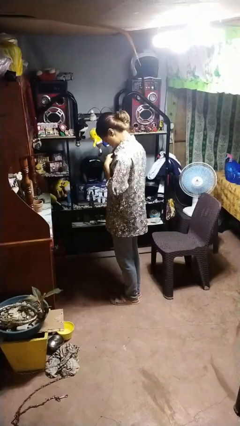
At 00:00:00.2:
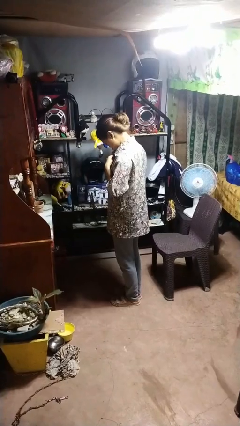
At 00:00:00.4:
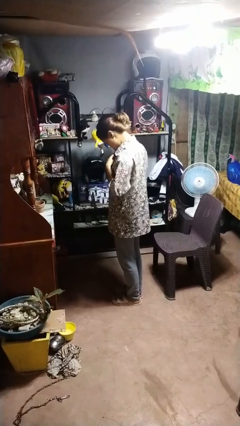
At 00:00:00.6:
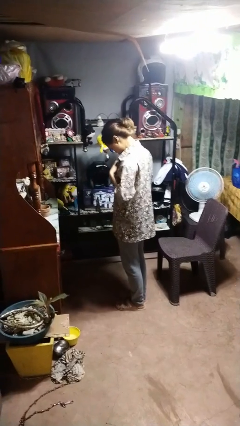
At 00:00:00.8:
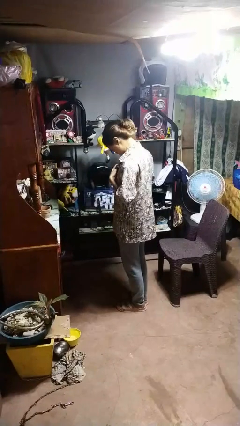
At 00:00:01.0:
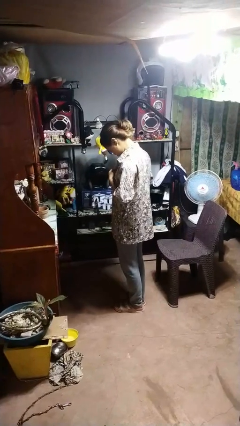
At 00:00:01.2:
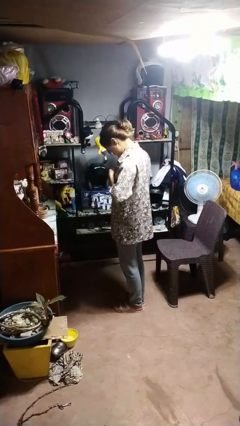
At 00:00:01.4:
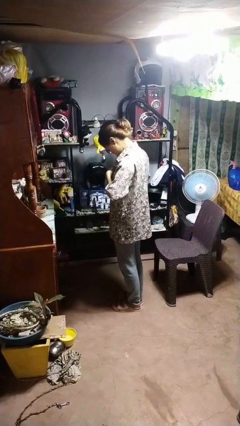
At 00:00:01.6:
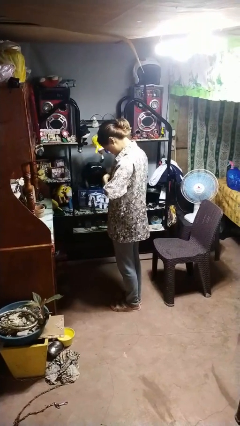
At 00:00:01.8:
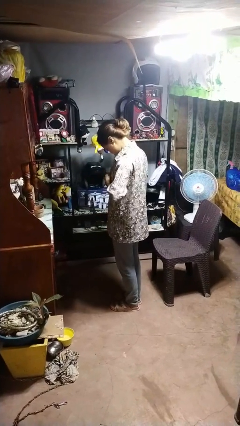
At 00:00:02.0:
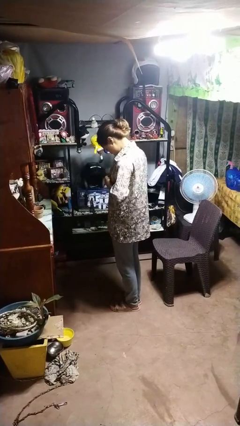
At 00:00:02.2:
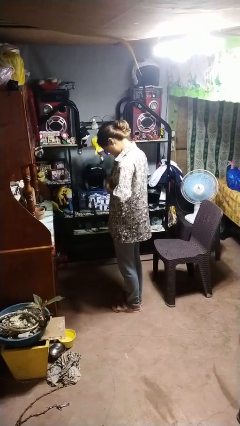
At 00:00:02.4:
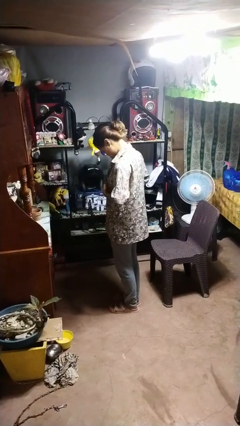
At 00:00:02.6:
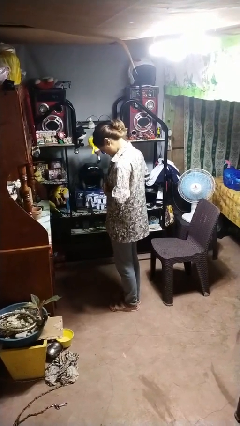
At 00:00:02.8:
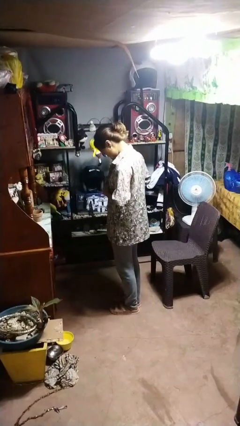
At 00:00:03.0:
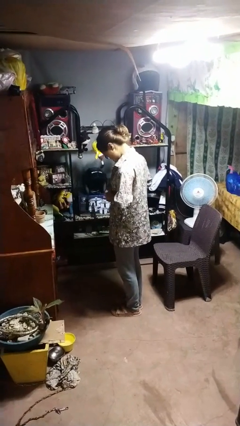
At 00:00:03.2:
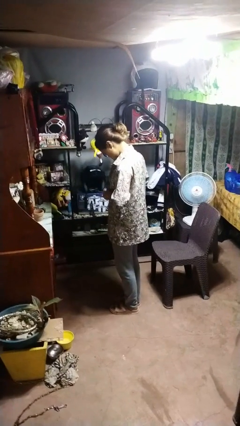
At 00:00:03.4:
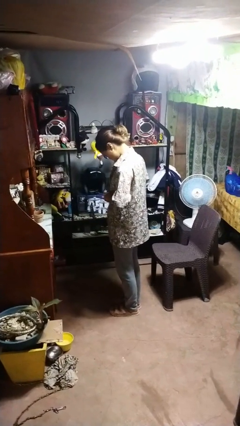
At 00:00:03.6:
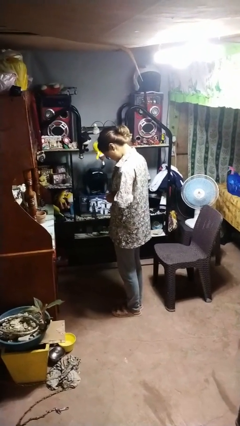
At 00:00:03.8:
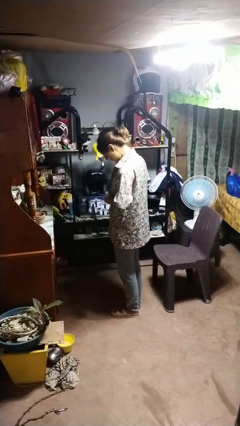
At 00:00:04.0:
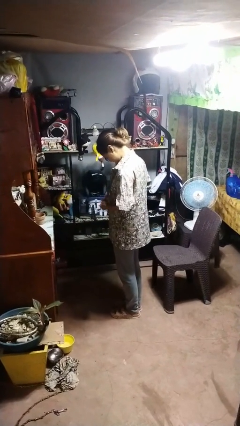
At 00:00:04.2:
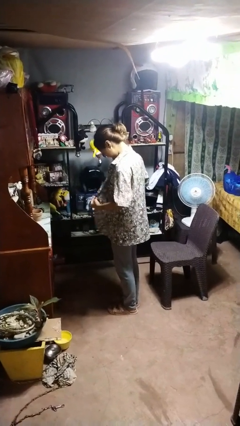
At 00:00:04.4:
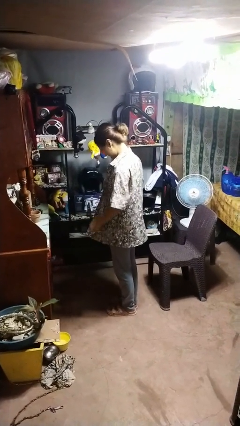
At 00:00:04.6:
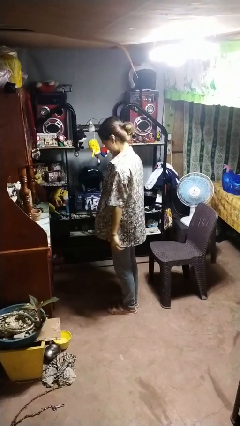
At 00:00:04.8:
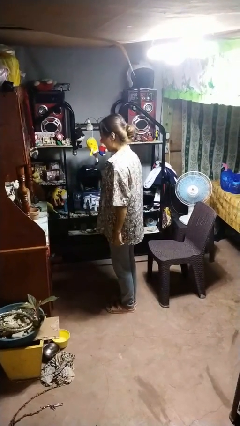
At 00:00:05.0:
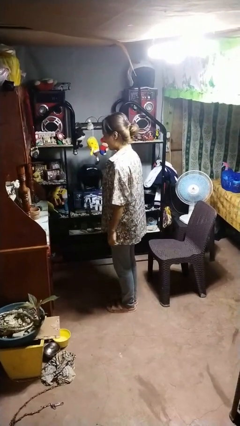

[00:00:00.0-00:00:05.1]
person unbuttons shirt

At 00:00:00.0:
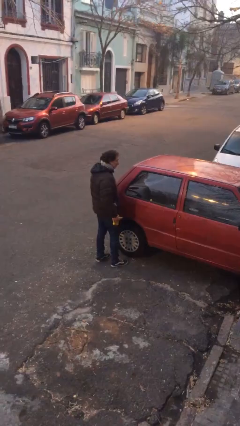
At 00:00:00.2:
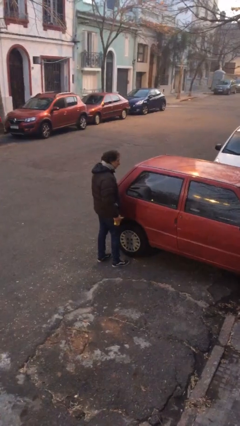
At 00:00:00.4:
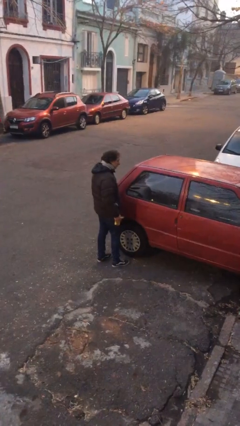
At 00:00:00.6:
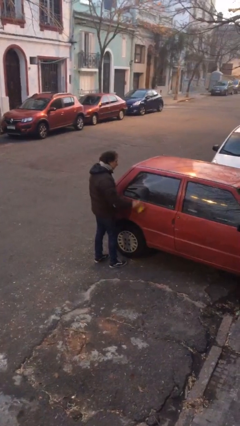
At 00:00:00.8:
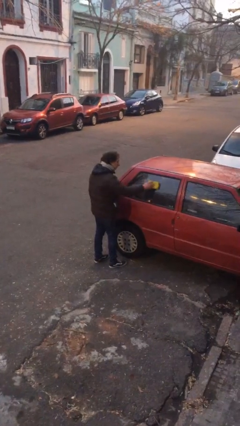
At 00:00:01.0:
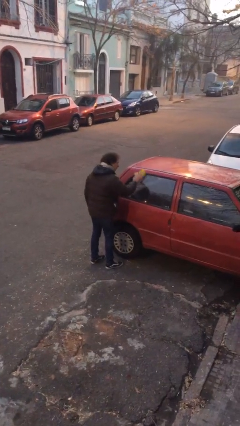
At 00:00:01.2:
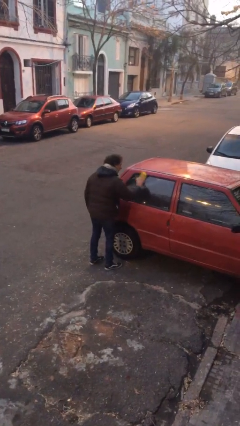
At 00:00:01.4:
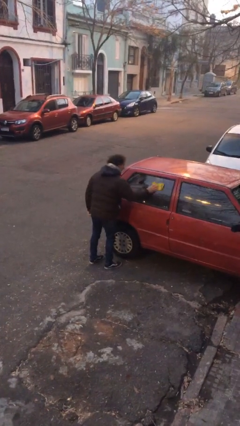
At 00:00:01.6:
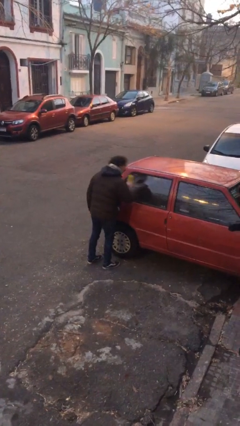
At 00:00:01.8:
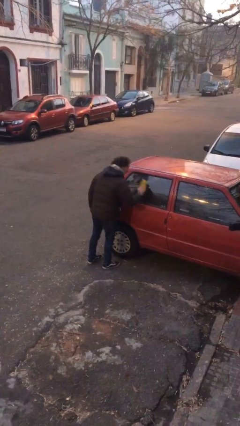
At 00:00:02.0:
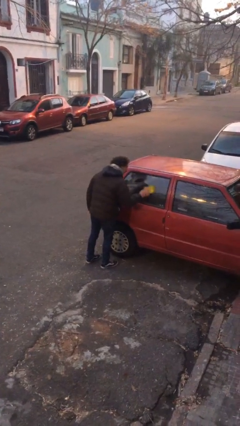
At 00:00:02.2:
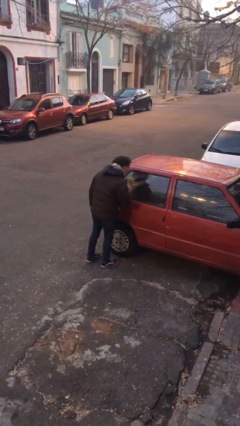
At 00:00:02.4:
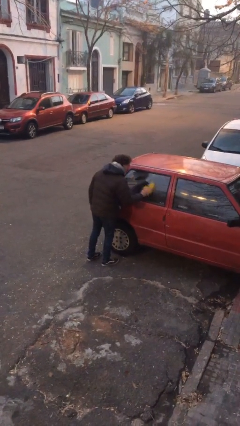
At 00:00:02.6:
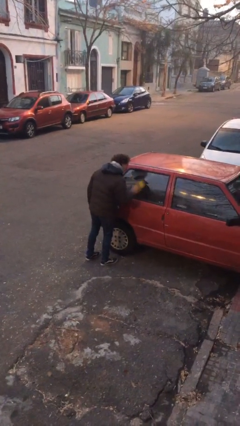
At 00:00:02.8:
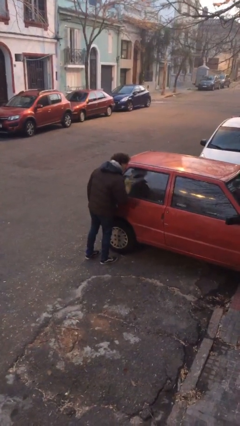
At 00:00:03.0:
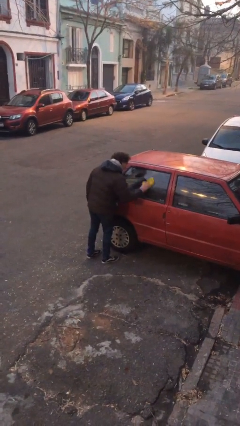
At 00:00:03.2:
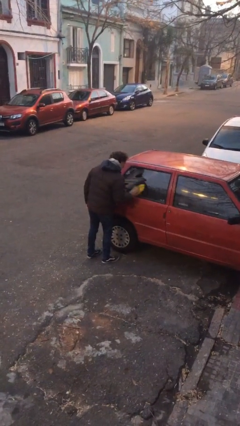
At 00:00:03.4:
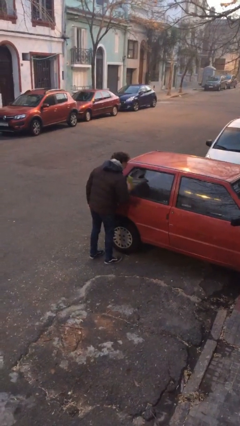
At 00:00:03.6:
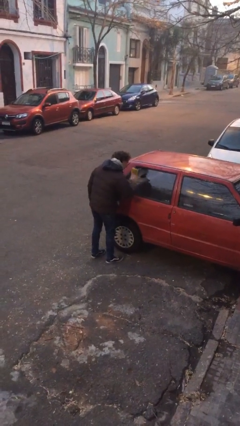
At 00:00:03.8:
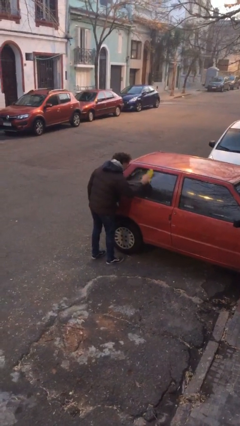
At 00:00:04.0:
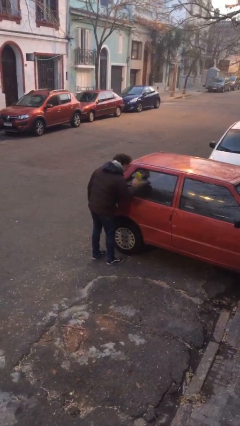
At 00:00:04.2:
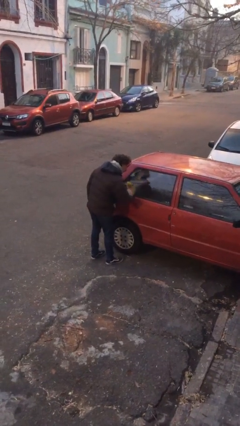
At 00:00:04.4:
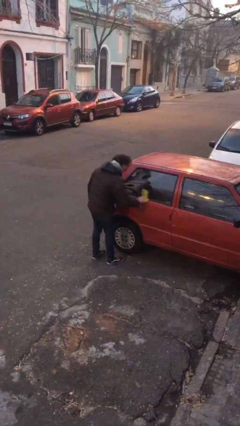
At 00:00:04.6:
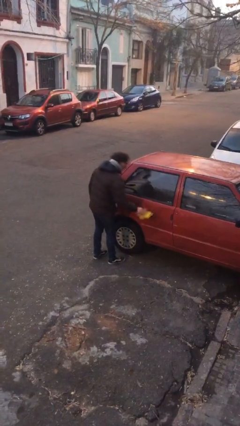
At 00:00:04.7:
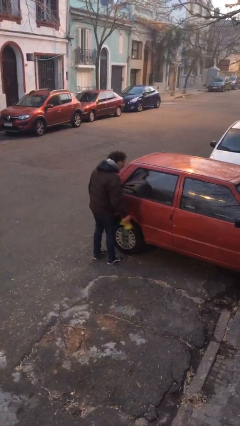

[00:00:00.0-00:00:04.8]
person polishes car with rag

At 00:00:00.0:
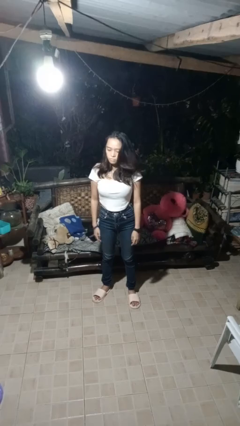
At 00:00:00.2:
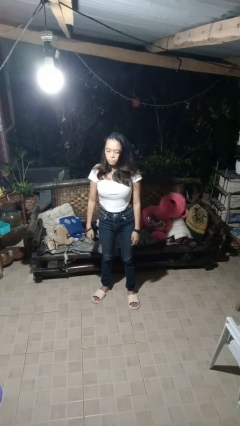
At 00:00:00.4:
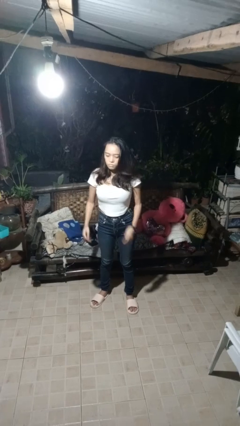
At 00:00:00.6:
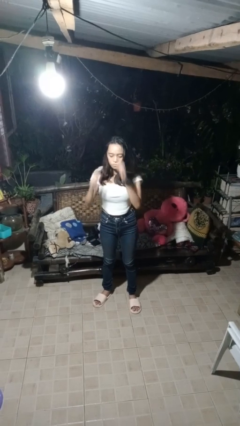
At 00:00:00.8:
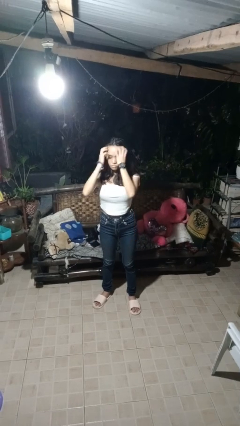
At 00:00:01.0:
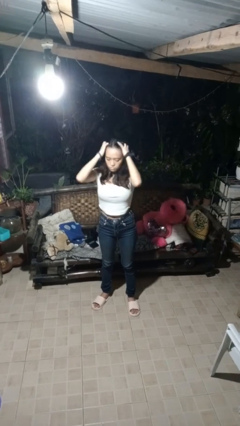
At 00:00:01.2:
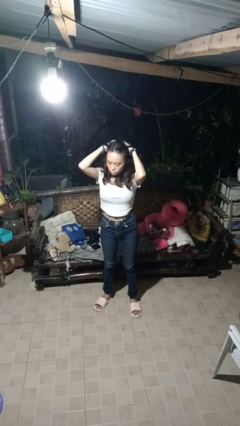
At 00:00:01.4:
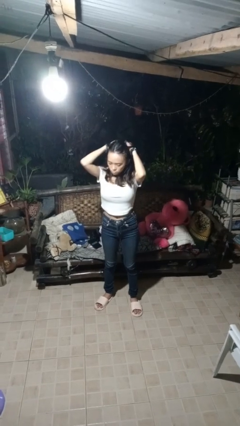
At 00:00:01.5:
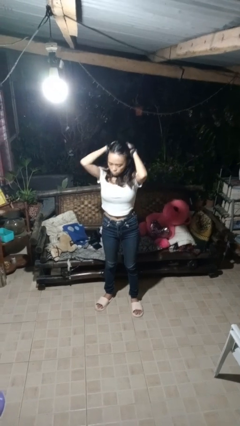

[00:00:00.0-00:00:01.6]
person strokes hair

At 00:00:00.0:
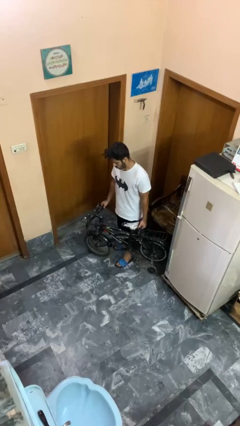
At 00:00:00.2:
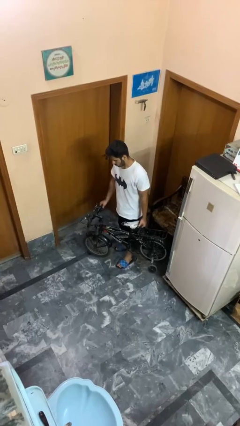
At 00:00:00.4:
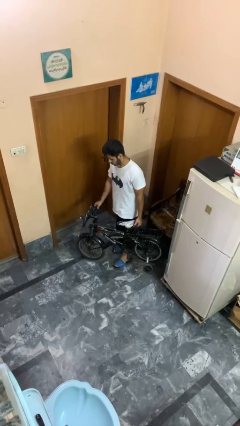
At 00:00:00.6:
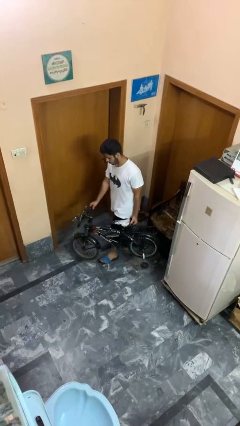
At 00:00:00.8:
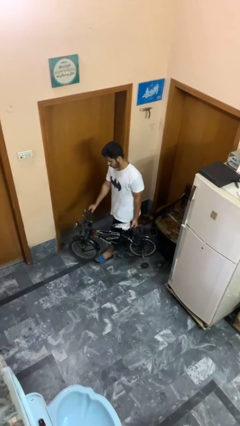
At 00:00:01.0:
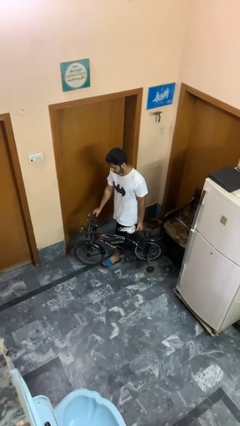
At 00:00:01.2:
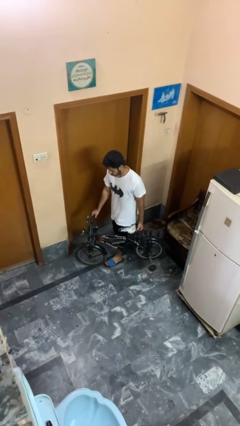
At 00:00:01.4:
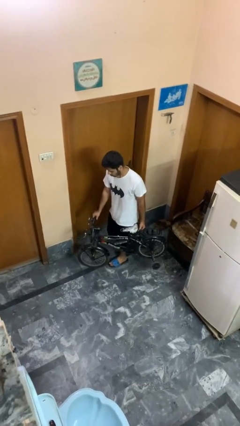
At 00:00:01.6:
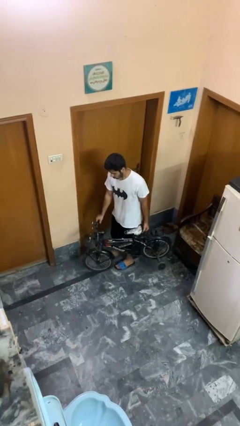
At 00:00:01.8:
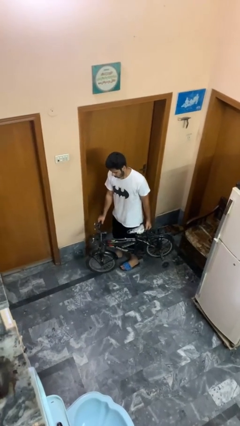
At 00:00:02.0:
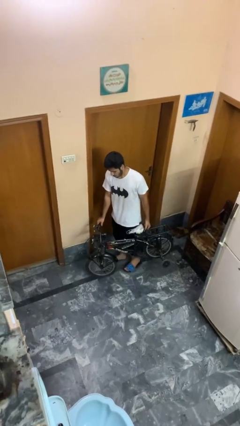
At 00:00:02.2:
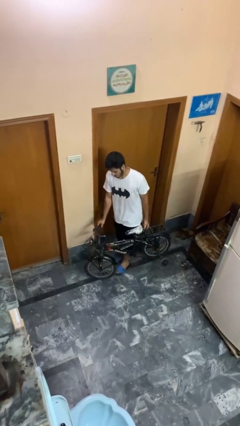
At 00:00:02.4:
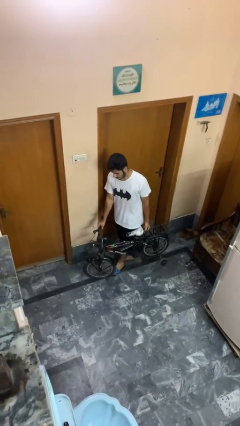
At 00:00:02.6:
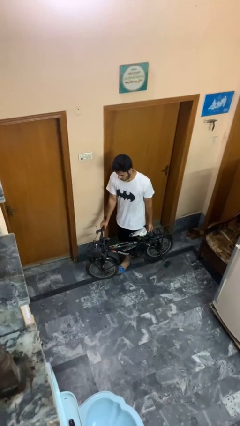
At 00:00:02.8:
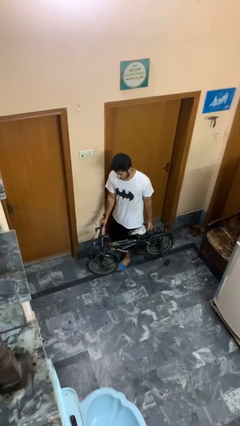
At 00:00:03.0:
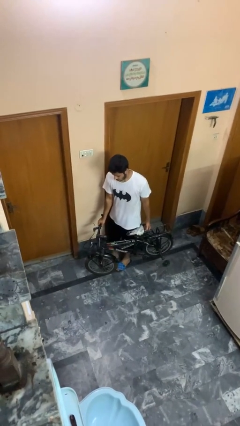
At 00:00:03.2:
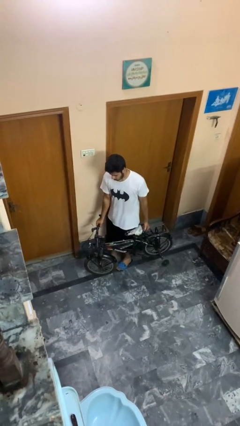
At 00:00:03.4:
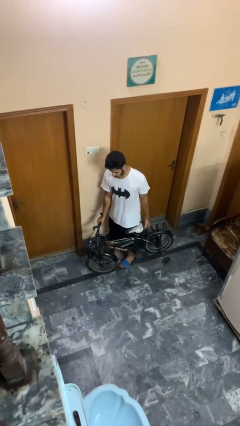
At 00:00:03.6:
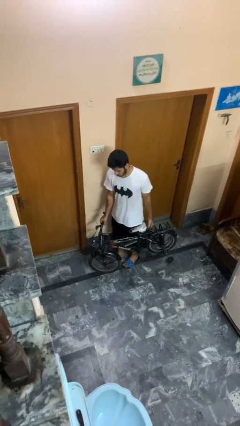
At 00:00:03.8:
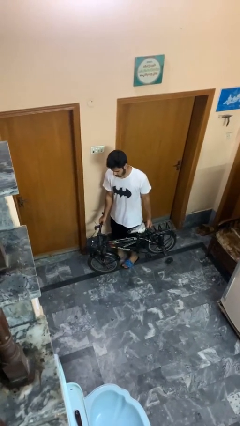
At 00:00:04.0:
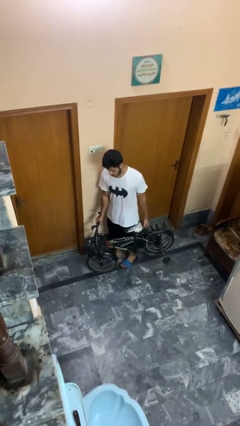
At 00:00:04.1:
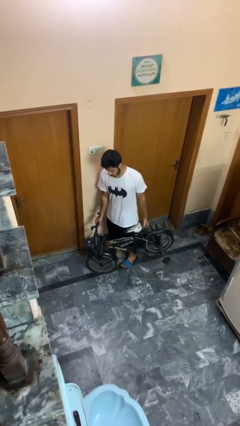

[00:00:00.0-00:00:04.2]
person carries bicycle

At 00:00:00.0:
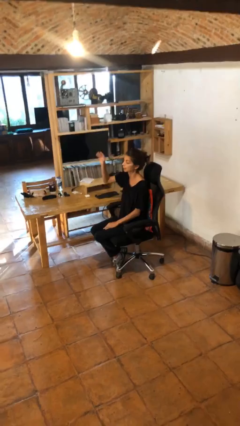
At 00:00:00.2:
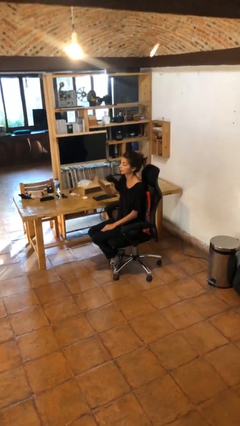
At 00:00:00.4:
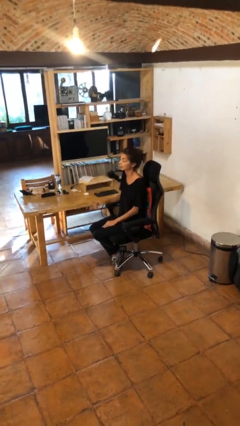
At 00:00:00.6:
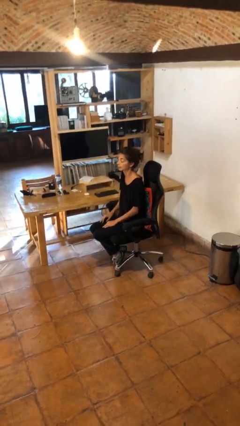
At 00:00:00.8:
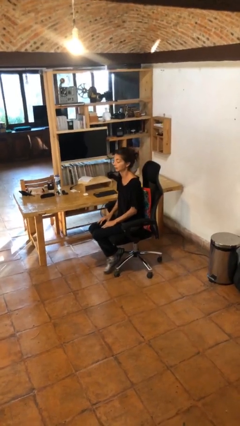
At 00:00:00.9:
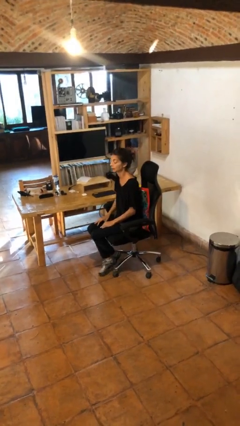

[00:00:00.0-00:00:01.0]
person gestures lower hand

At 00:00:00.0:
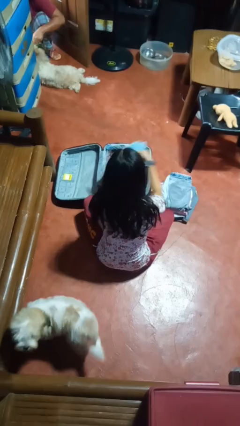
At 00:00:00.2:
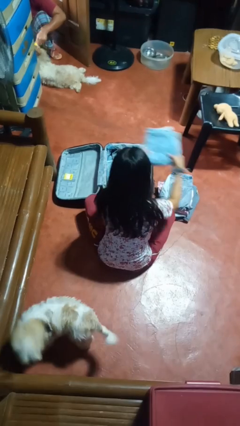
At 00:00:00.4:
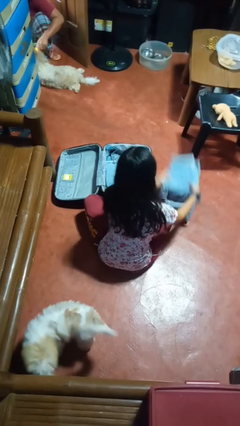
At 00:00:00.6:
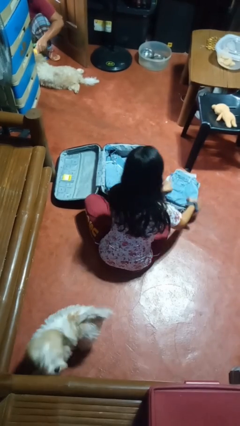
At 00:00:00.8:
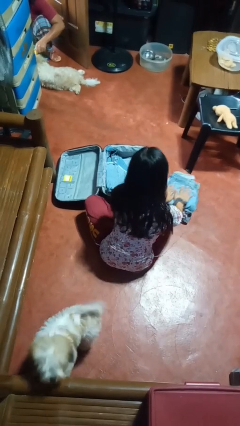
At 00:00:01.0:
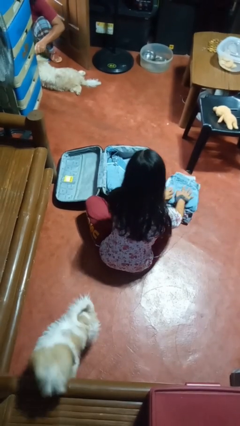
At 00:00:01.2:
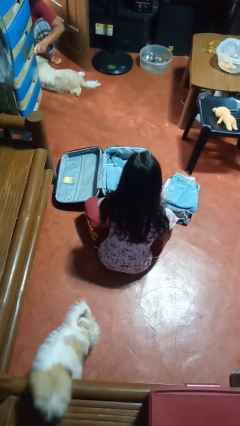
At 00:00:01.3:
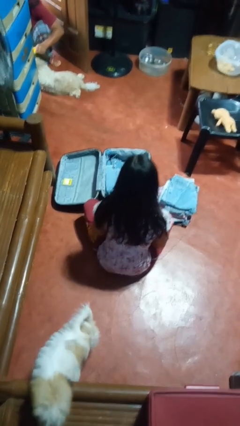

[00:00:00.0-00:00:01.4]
person unloads clothes from suitcase
